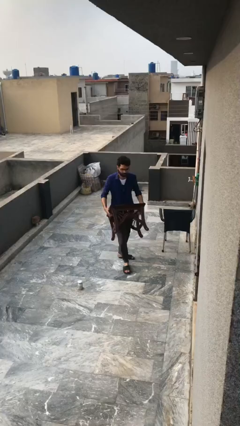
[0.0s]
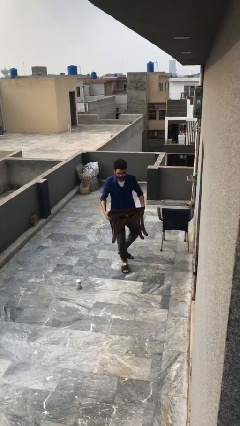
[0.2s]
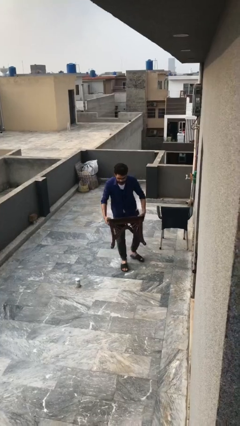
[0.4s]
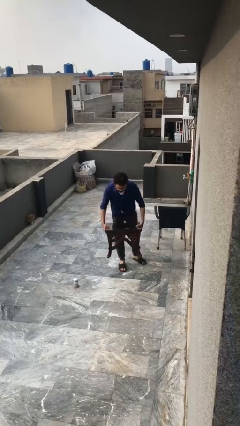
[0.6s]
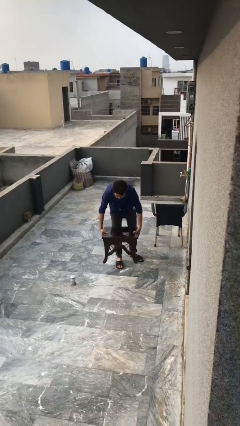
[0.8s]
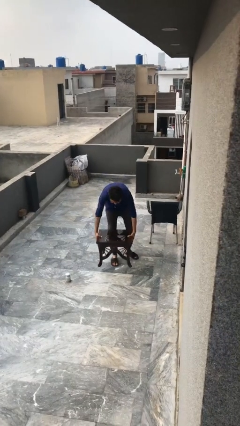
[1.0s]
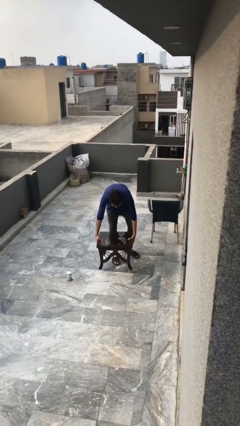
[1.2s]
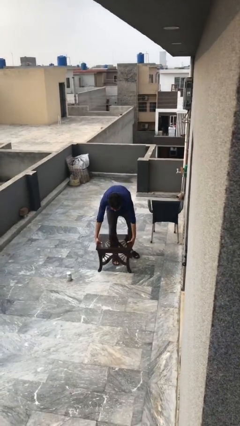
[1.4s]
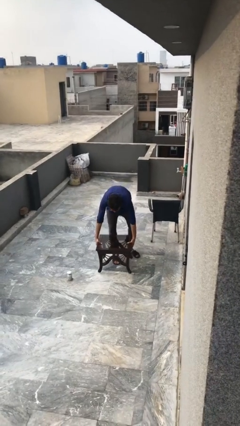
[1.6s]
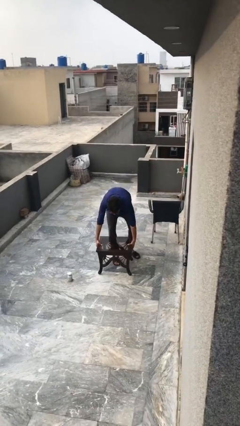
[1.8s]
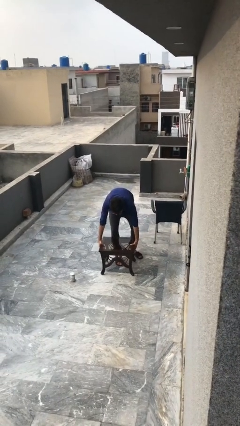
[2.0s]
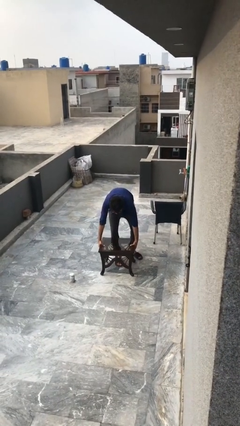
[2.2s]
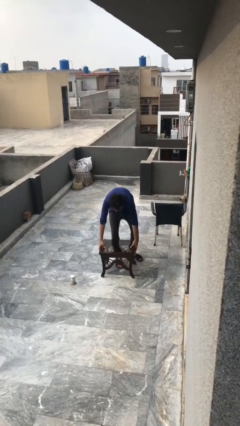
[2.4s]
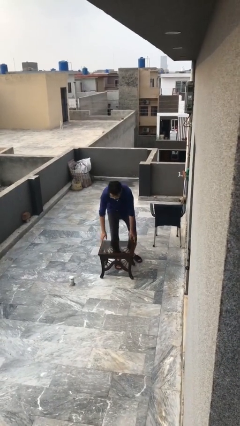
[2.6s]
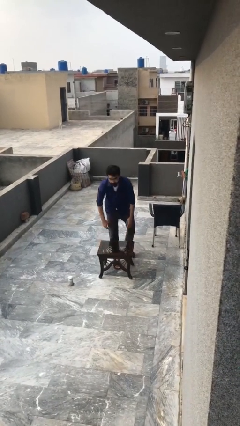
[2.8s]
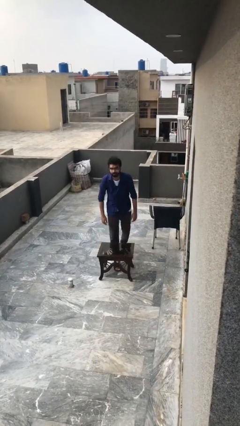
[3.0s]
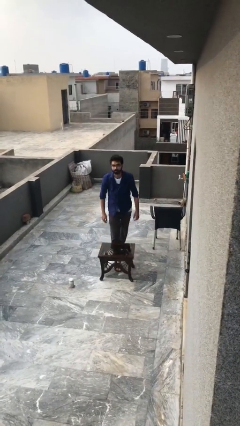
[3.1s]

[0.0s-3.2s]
person puts down object on floor

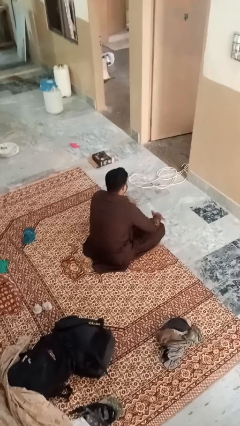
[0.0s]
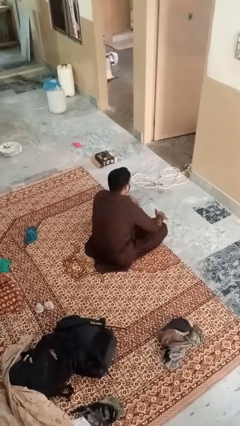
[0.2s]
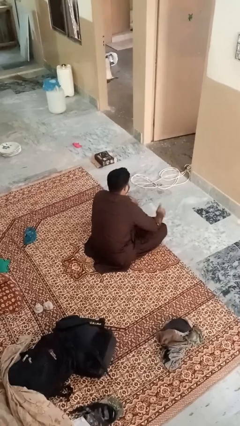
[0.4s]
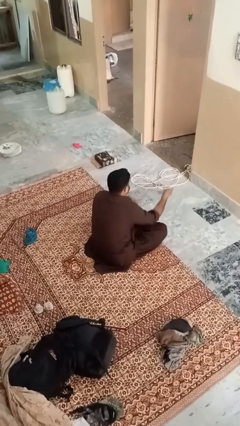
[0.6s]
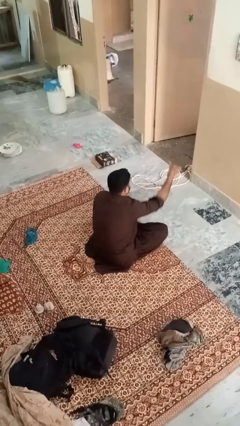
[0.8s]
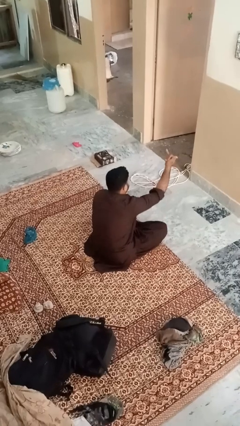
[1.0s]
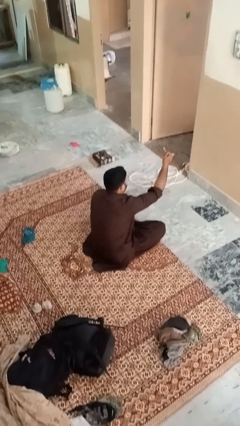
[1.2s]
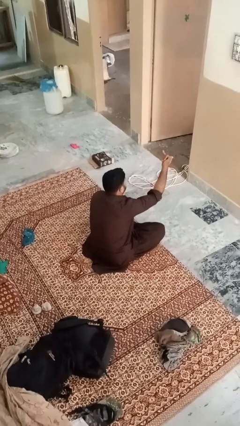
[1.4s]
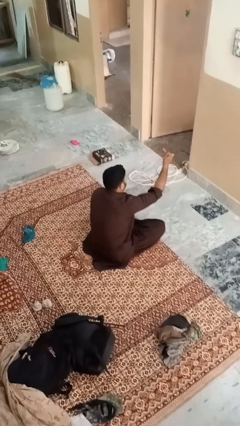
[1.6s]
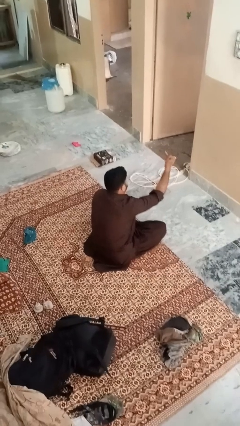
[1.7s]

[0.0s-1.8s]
person gestures hang loose

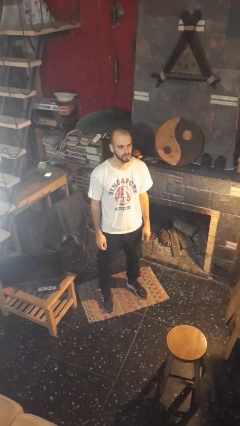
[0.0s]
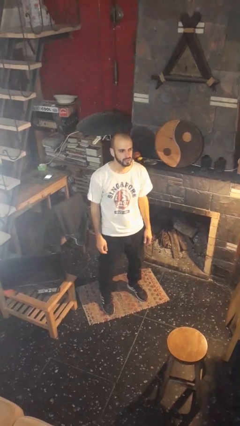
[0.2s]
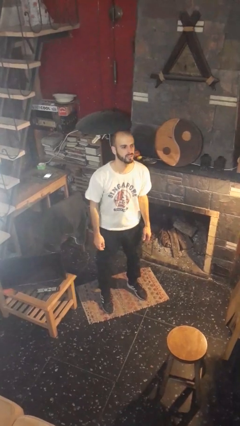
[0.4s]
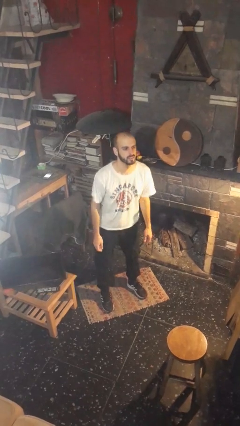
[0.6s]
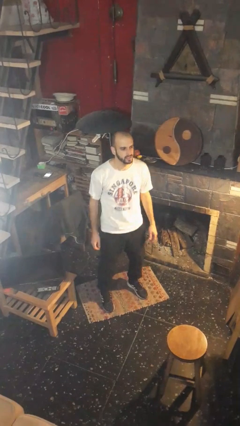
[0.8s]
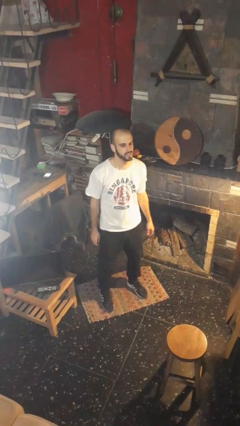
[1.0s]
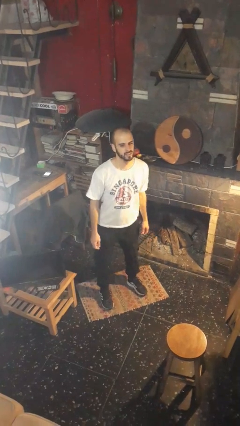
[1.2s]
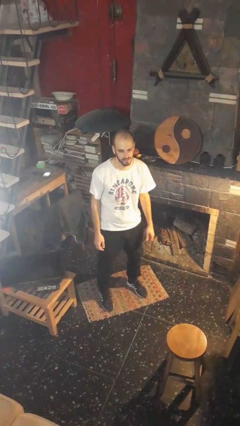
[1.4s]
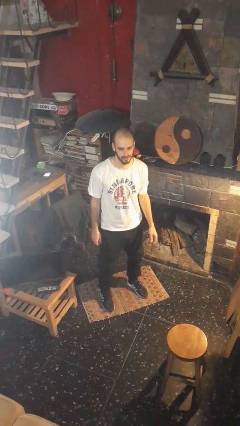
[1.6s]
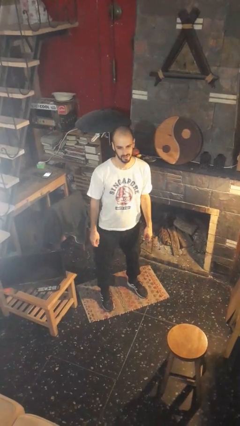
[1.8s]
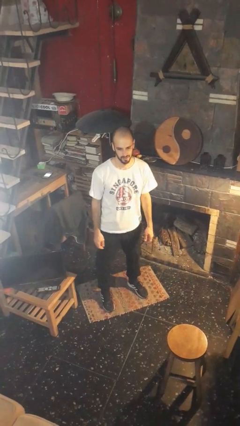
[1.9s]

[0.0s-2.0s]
person wiggles hips

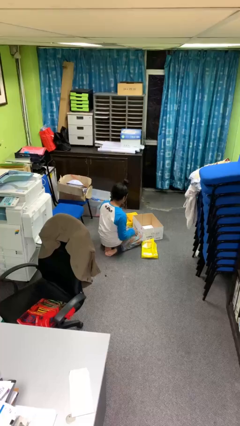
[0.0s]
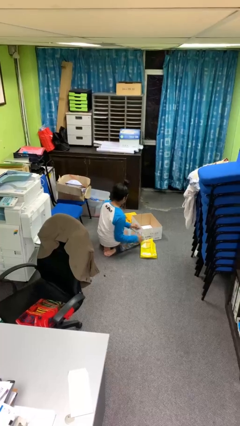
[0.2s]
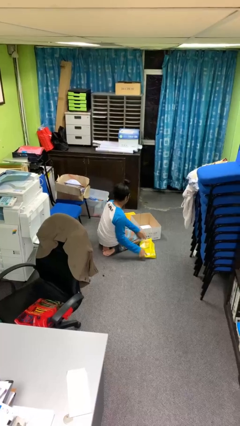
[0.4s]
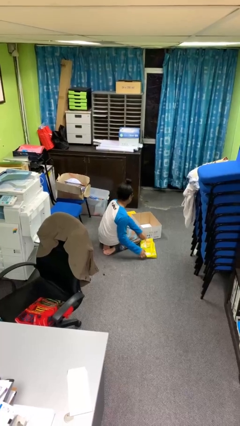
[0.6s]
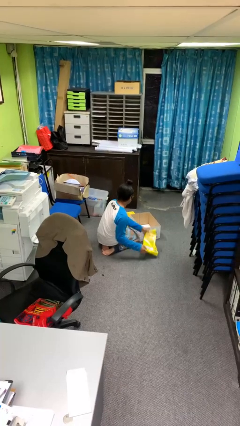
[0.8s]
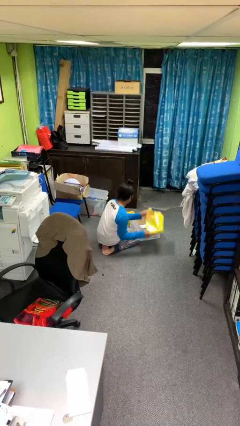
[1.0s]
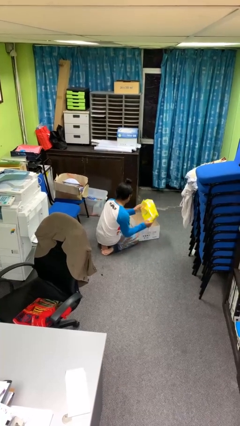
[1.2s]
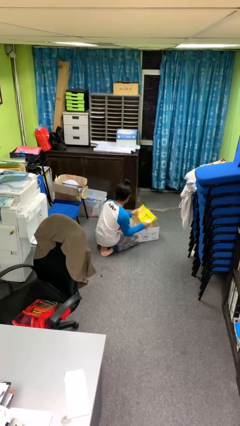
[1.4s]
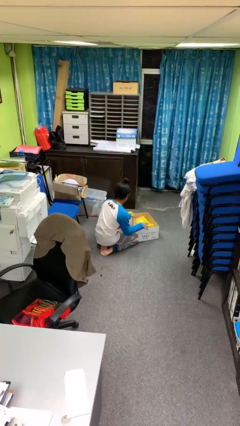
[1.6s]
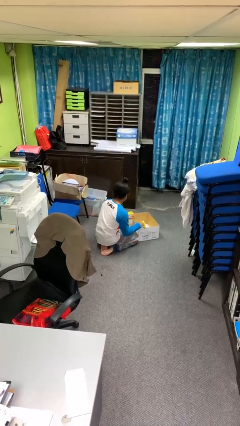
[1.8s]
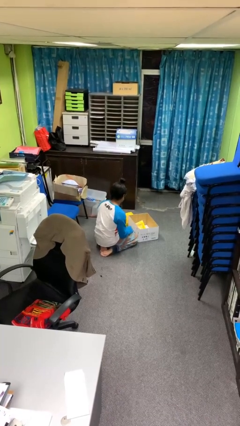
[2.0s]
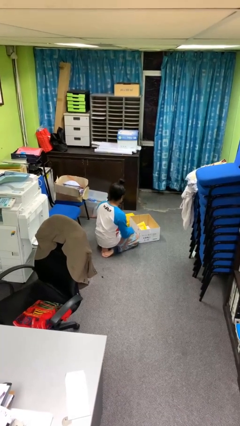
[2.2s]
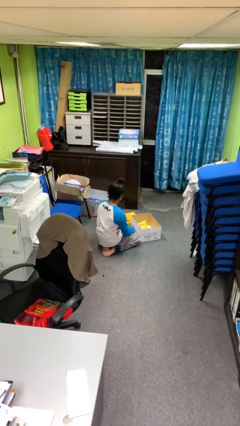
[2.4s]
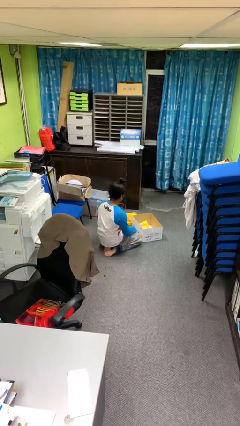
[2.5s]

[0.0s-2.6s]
person puts object into box

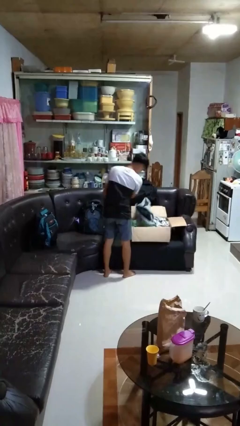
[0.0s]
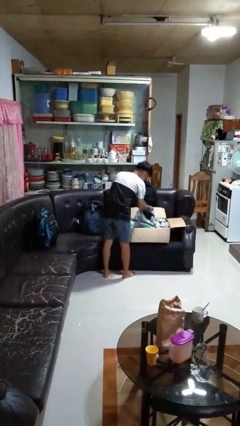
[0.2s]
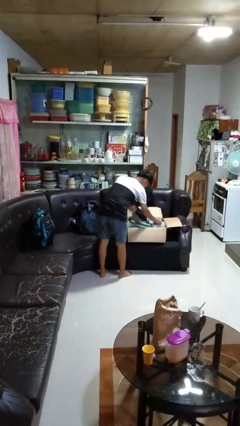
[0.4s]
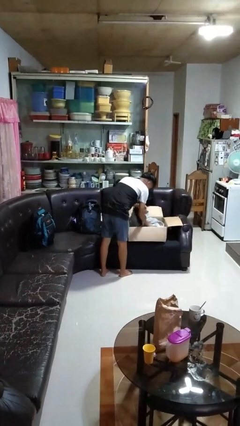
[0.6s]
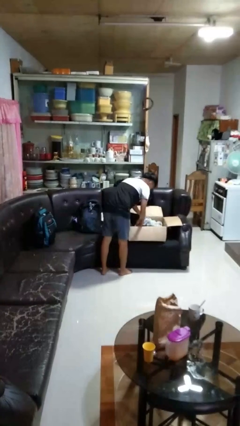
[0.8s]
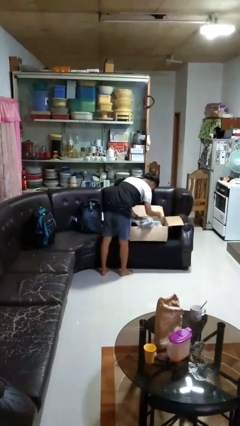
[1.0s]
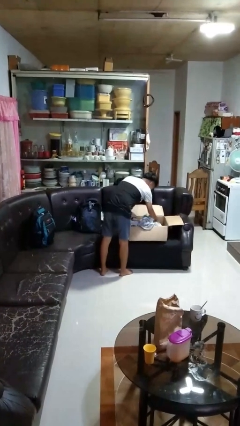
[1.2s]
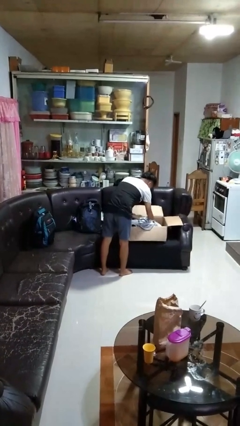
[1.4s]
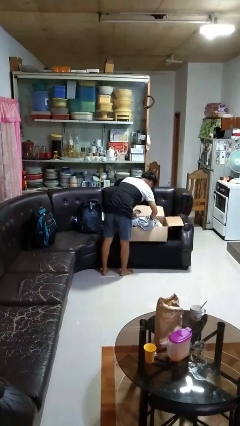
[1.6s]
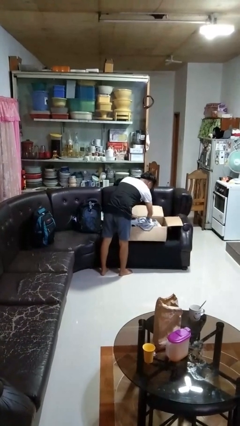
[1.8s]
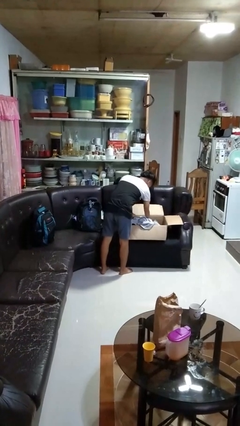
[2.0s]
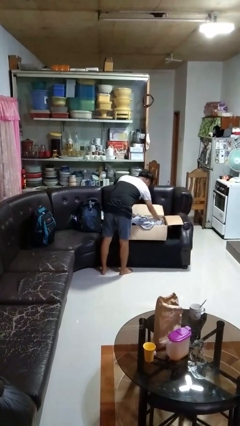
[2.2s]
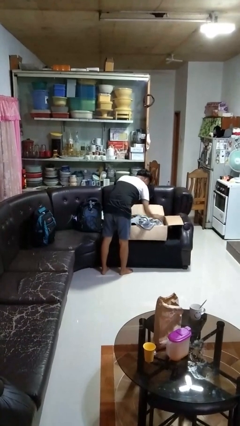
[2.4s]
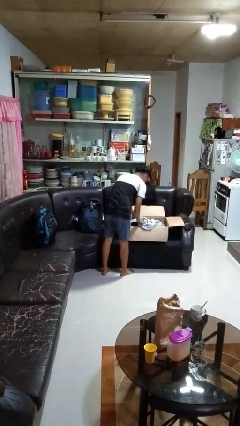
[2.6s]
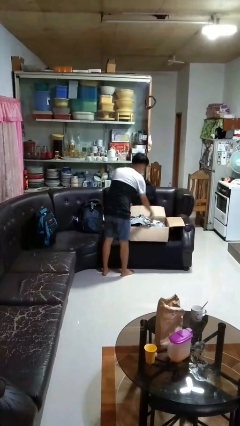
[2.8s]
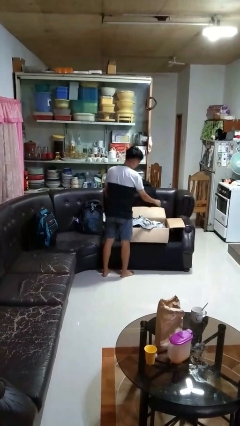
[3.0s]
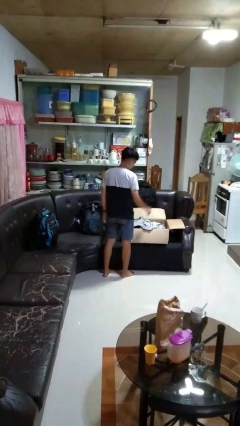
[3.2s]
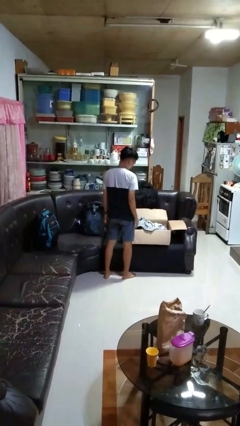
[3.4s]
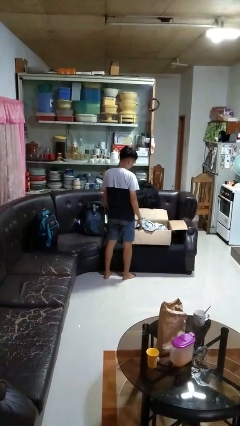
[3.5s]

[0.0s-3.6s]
person searches in box

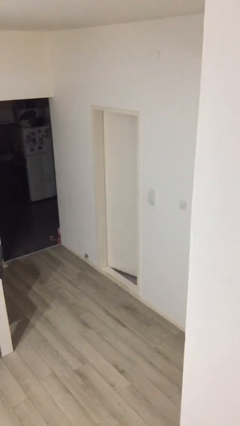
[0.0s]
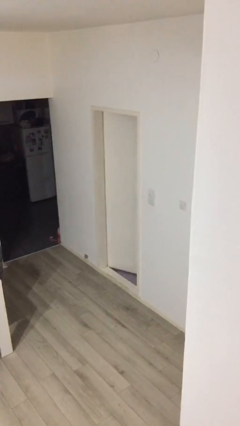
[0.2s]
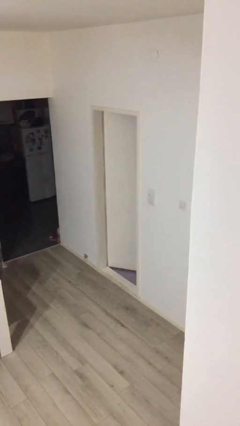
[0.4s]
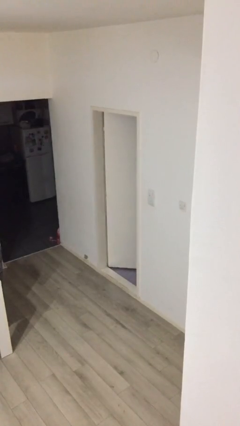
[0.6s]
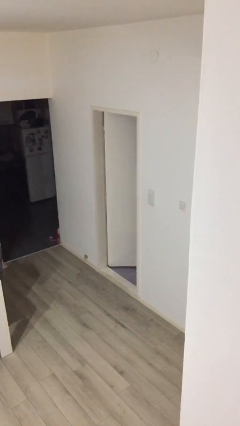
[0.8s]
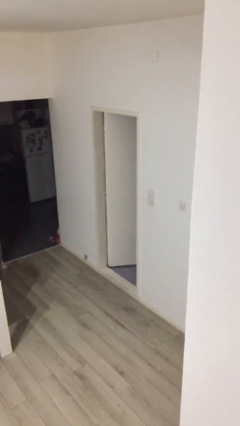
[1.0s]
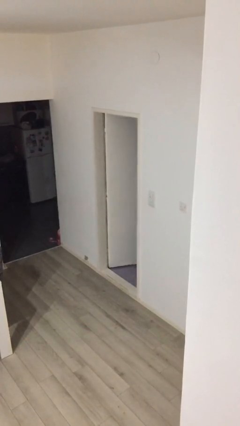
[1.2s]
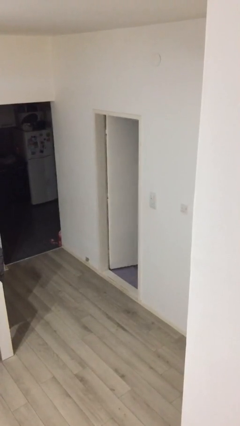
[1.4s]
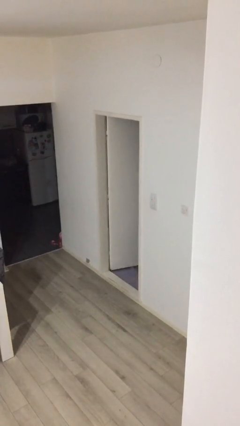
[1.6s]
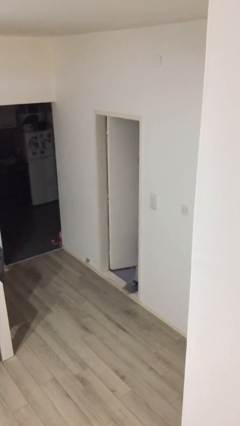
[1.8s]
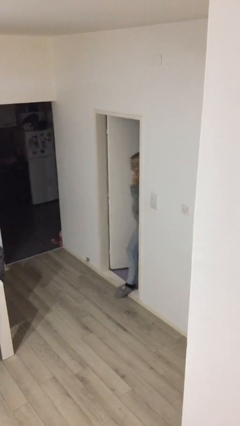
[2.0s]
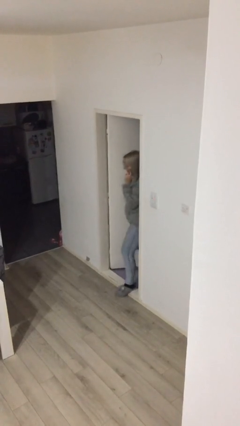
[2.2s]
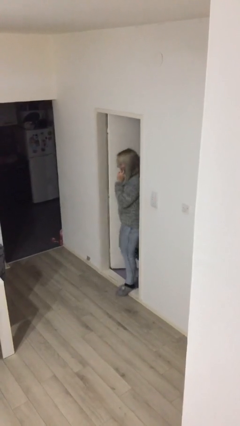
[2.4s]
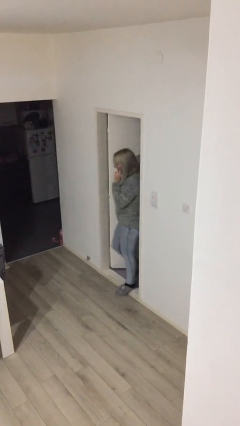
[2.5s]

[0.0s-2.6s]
person opens facility door

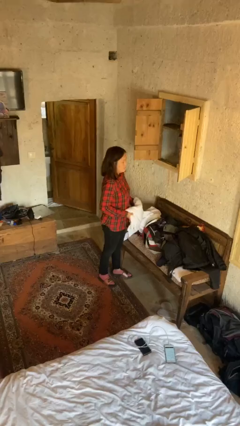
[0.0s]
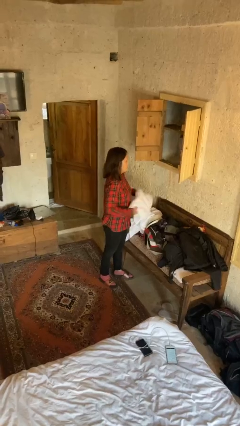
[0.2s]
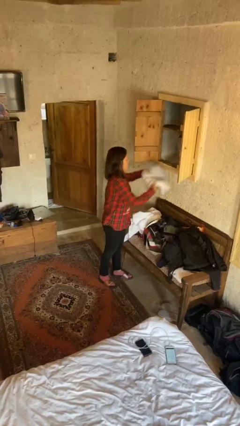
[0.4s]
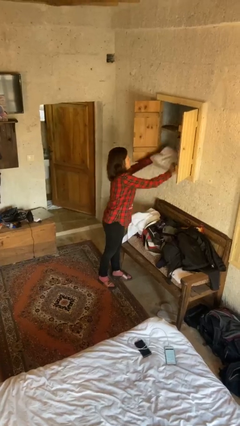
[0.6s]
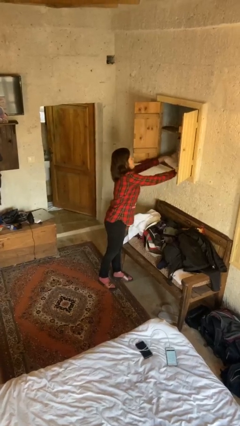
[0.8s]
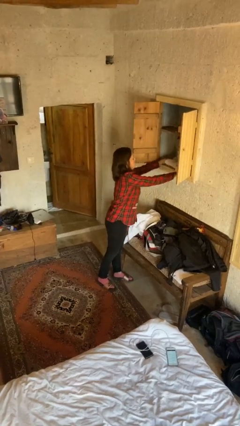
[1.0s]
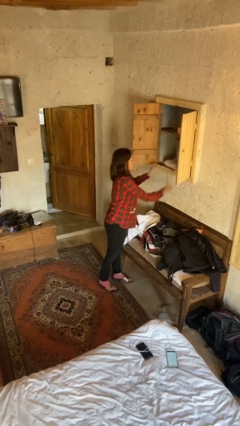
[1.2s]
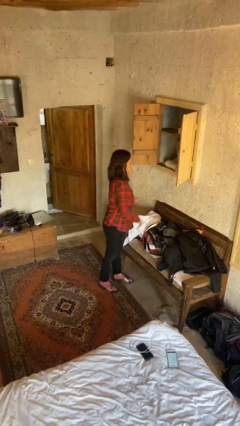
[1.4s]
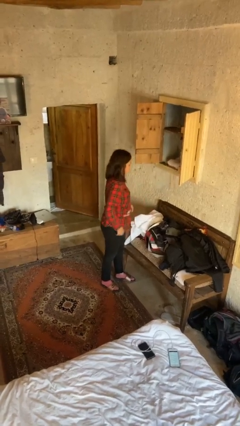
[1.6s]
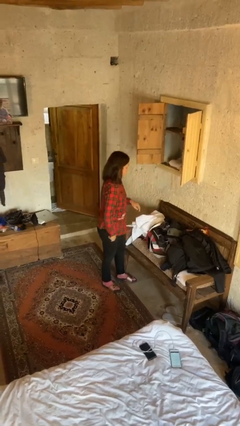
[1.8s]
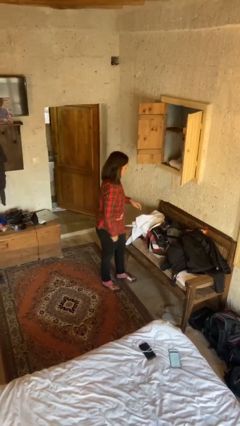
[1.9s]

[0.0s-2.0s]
person puts clothes into dresser
